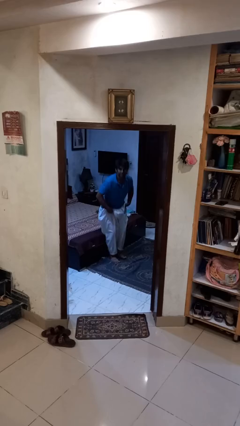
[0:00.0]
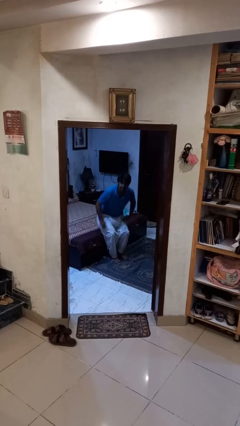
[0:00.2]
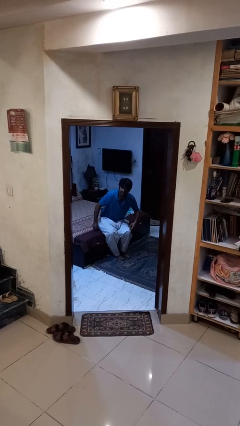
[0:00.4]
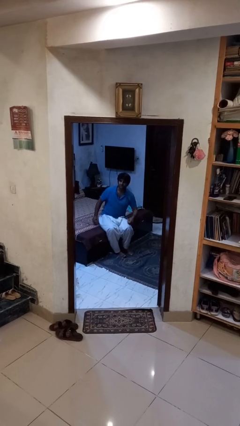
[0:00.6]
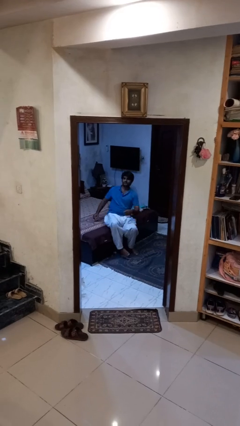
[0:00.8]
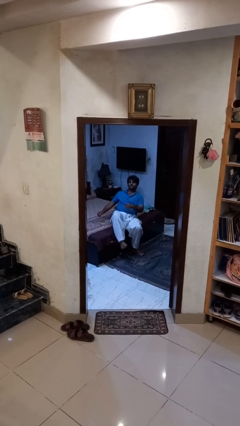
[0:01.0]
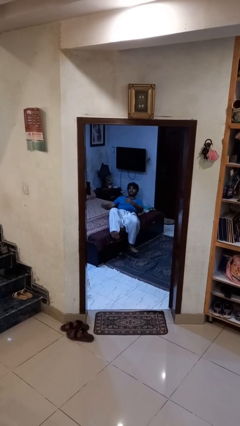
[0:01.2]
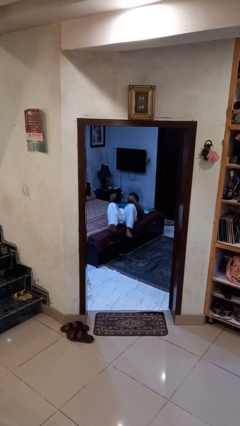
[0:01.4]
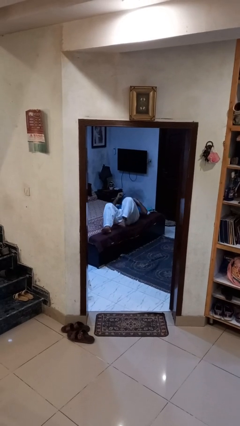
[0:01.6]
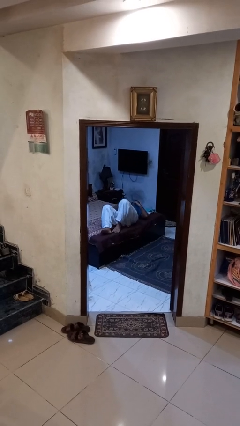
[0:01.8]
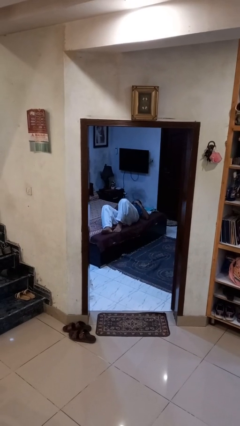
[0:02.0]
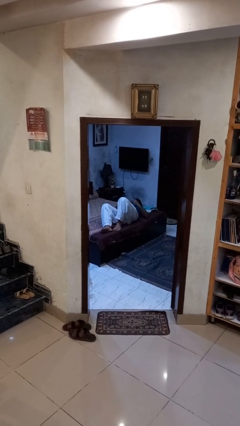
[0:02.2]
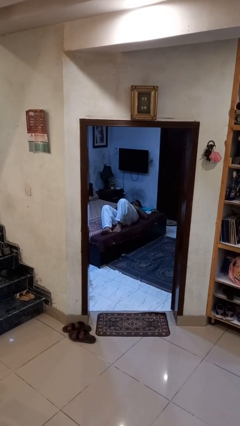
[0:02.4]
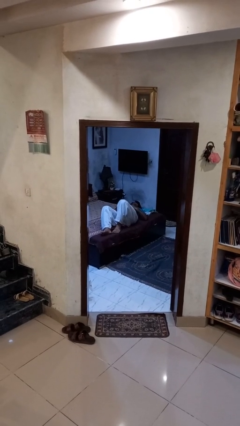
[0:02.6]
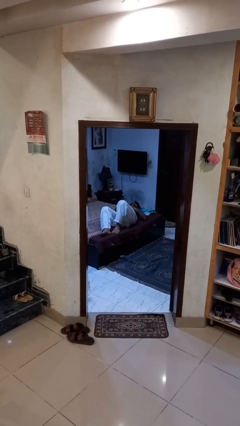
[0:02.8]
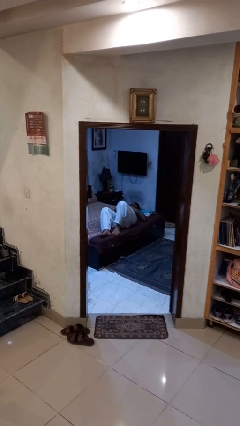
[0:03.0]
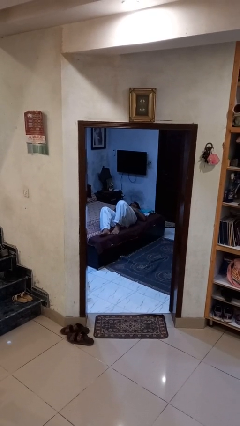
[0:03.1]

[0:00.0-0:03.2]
person lies down on bed

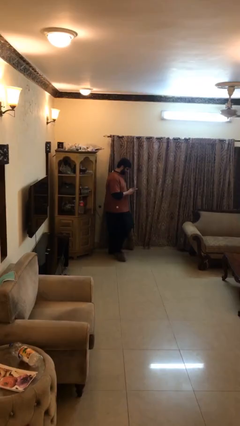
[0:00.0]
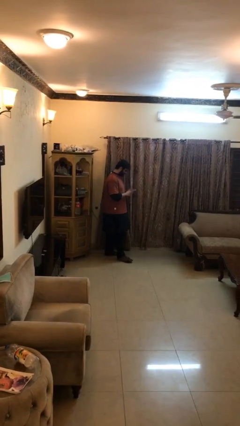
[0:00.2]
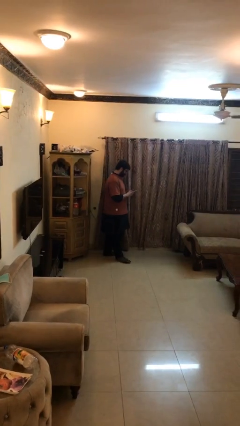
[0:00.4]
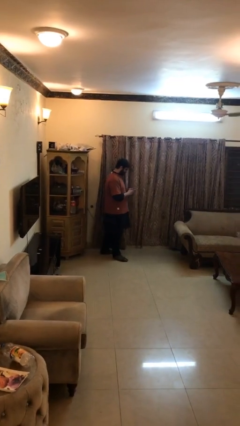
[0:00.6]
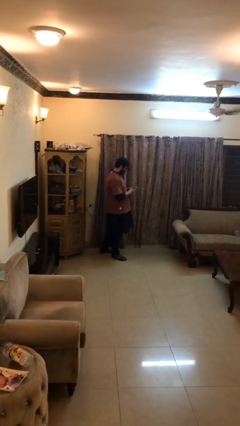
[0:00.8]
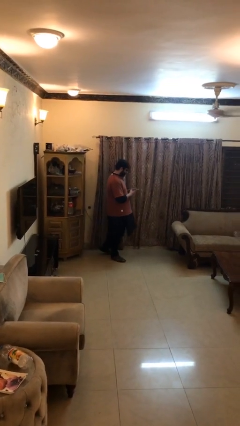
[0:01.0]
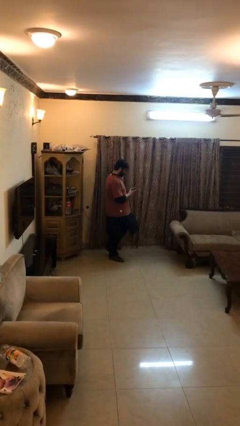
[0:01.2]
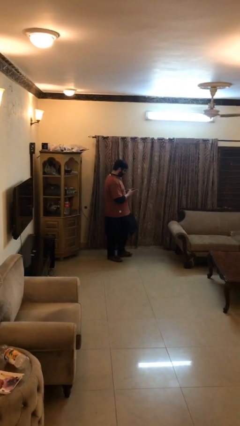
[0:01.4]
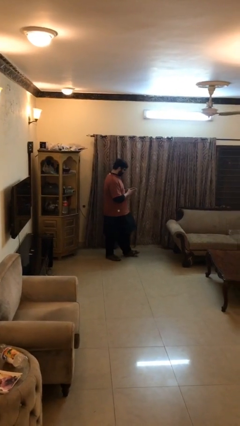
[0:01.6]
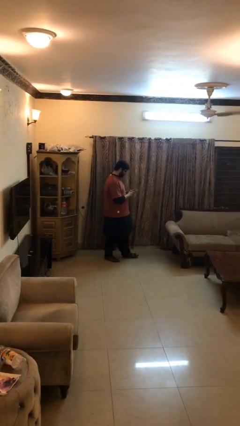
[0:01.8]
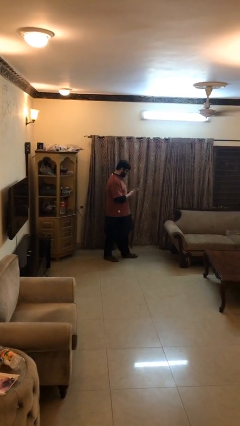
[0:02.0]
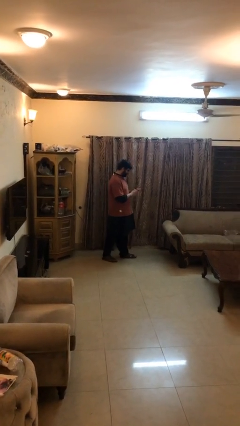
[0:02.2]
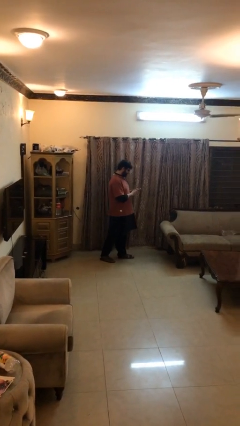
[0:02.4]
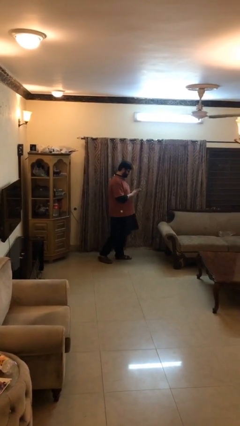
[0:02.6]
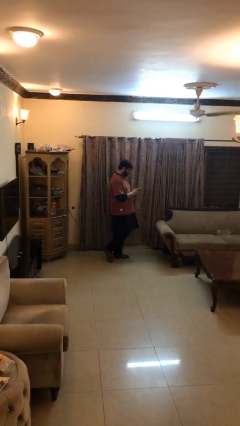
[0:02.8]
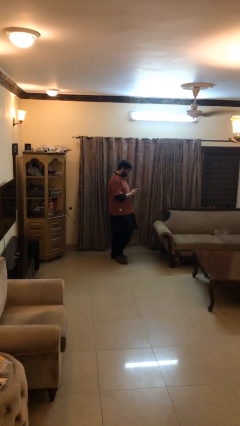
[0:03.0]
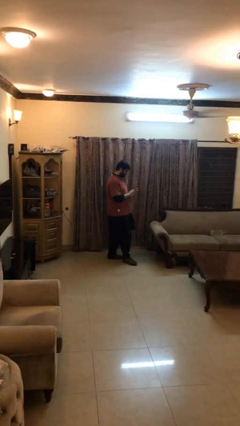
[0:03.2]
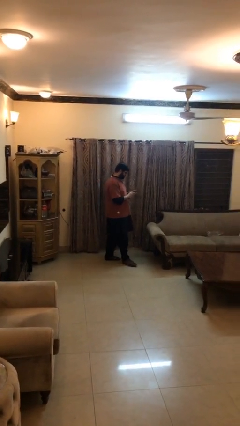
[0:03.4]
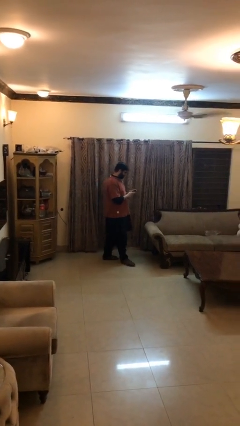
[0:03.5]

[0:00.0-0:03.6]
person texts on phone

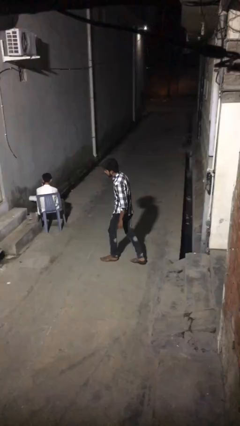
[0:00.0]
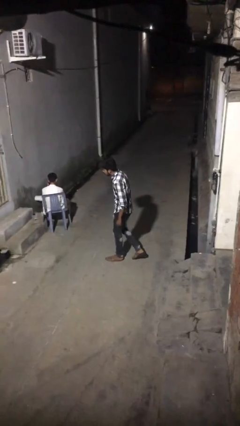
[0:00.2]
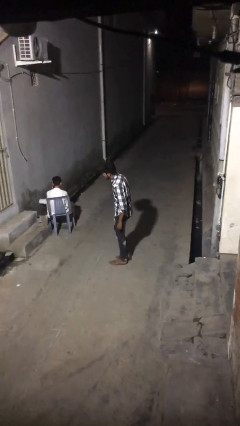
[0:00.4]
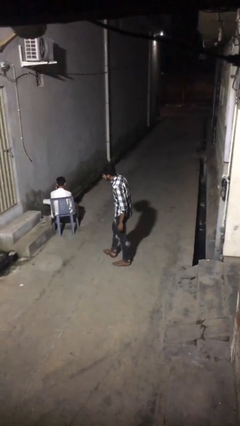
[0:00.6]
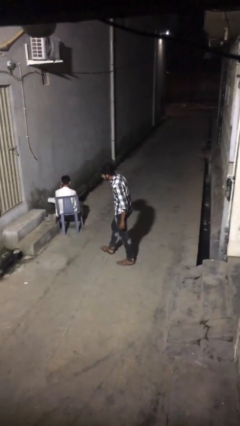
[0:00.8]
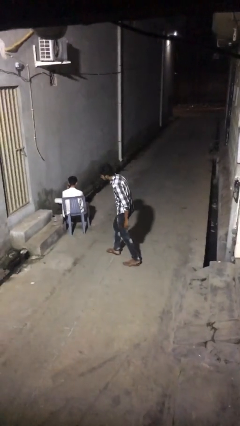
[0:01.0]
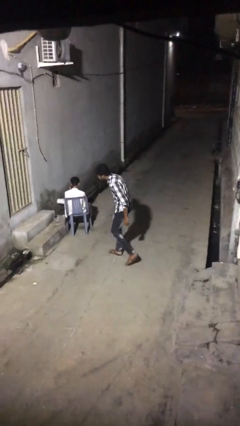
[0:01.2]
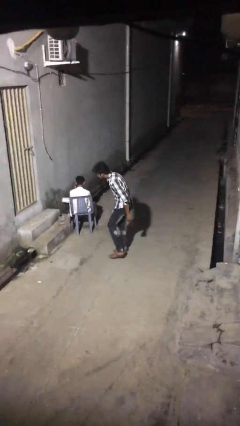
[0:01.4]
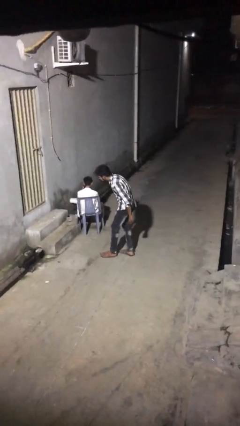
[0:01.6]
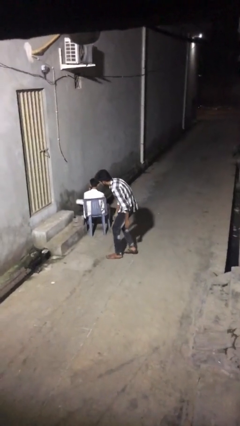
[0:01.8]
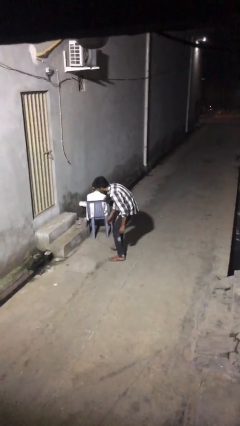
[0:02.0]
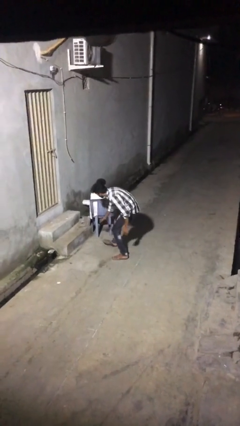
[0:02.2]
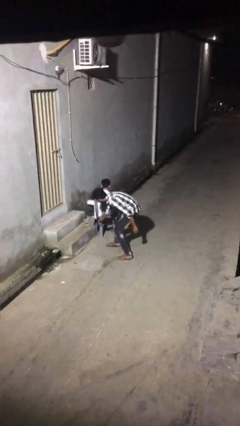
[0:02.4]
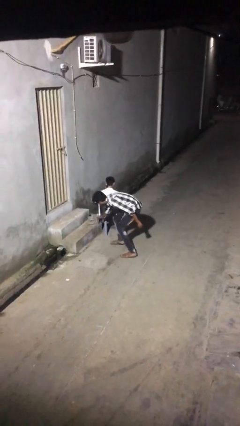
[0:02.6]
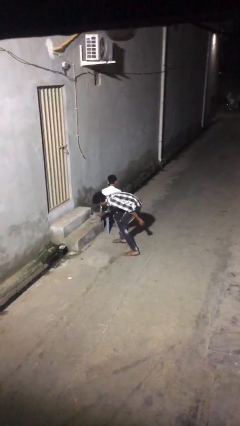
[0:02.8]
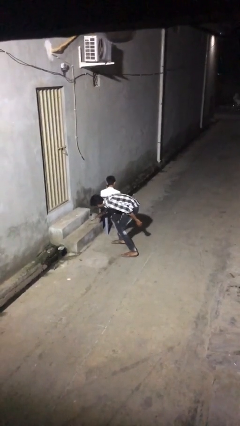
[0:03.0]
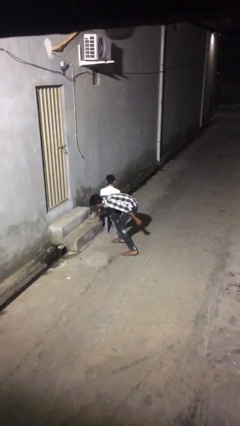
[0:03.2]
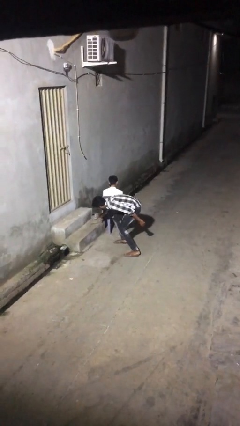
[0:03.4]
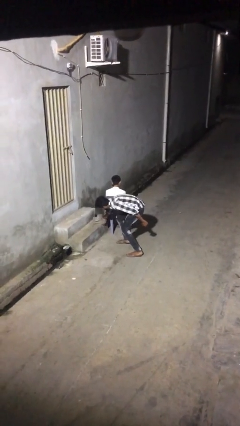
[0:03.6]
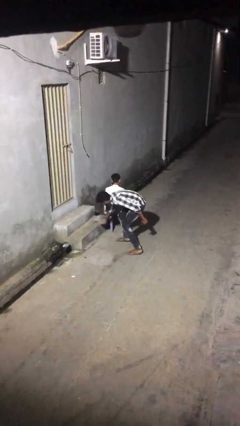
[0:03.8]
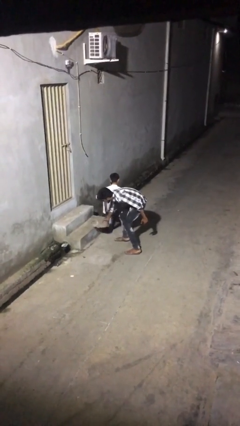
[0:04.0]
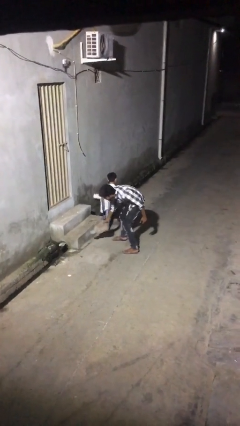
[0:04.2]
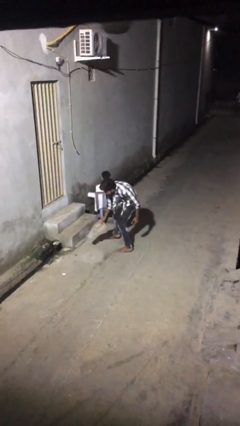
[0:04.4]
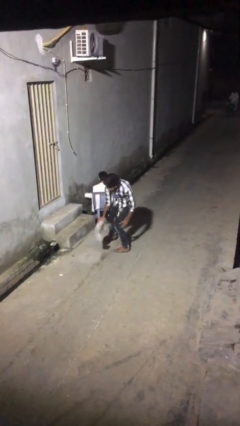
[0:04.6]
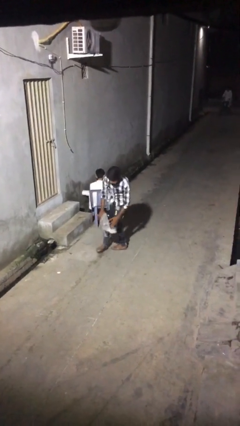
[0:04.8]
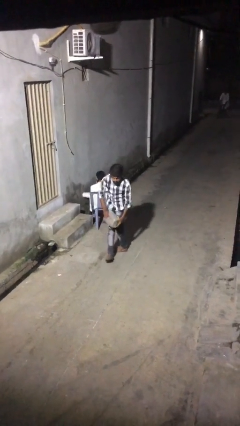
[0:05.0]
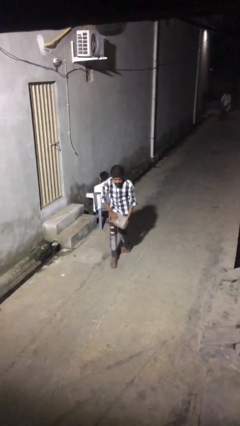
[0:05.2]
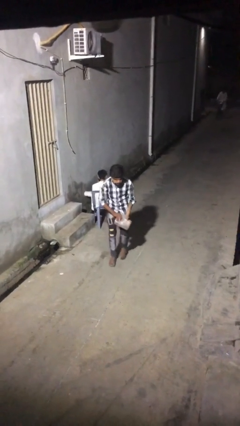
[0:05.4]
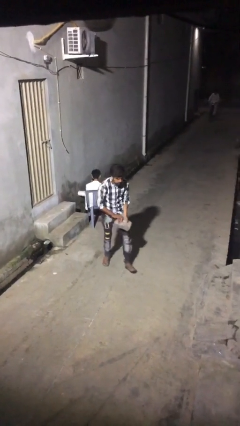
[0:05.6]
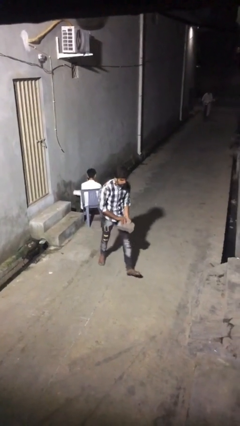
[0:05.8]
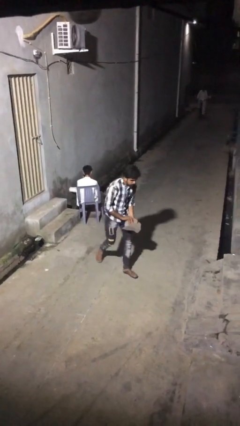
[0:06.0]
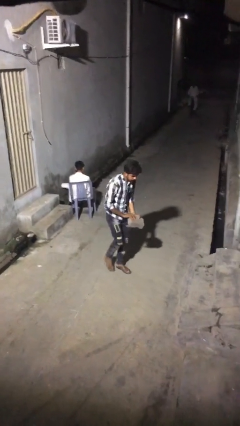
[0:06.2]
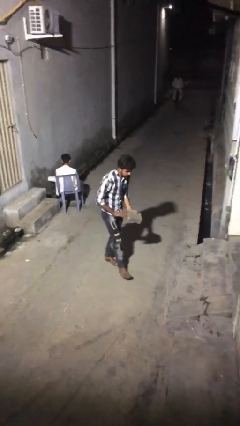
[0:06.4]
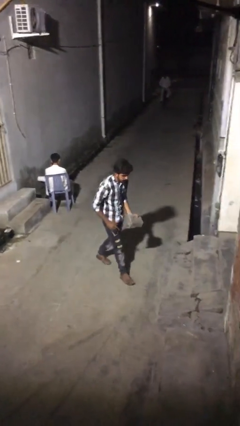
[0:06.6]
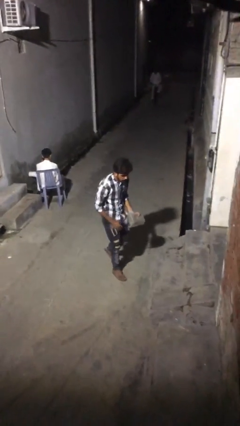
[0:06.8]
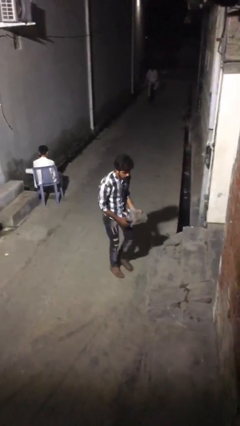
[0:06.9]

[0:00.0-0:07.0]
person steals object from person

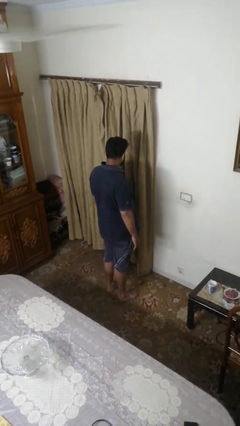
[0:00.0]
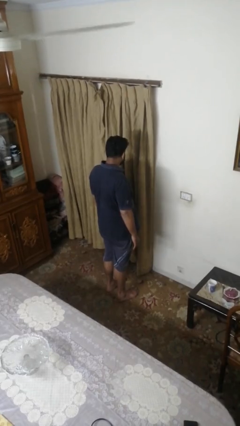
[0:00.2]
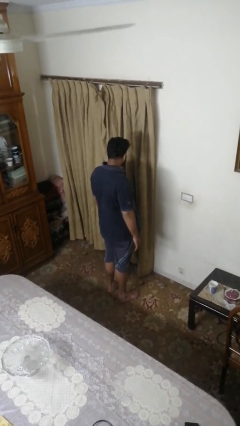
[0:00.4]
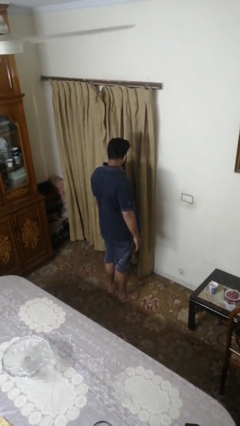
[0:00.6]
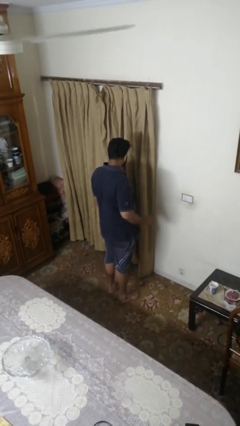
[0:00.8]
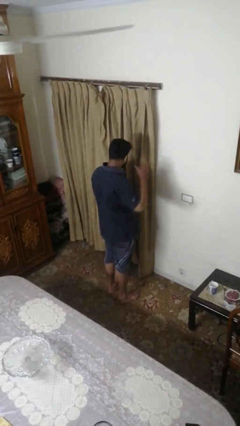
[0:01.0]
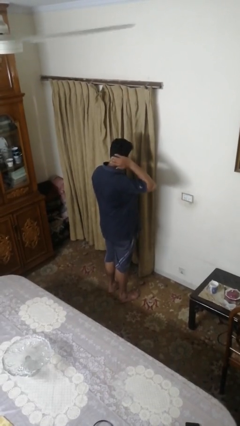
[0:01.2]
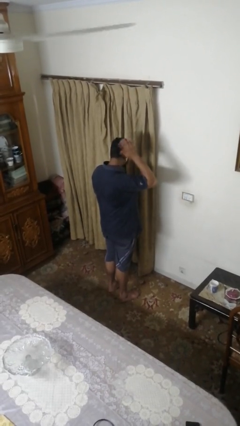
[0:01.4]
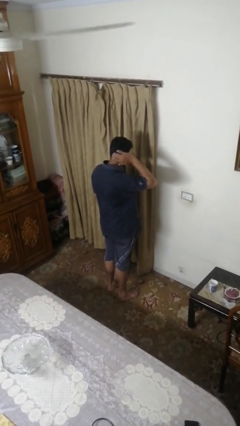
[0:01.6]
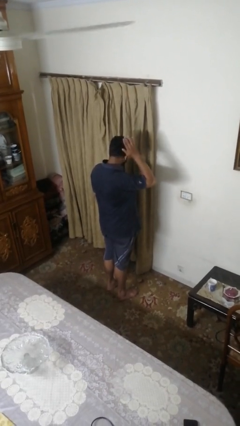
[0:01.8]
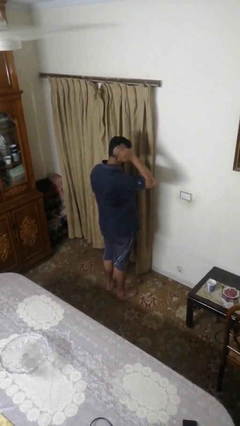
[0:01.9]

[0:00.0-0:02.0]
person strokes hair

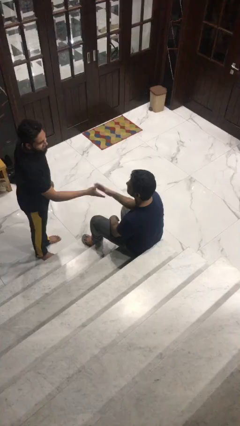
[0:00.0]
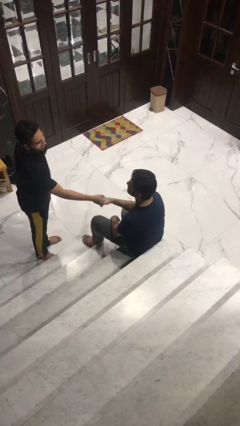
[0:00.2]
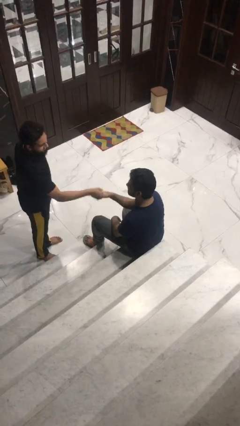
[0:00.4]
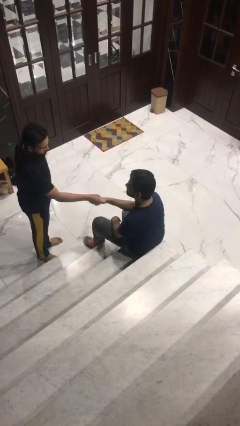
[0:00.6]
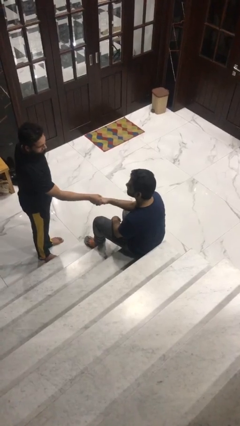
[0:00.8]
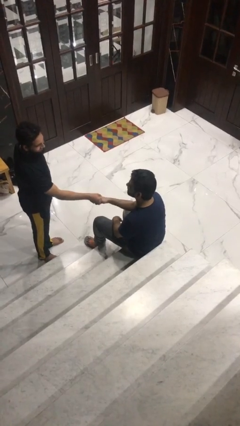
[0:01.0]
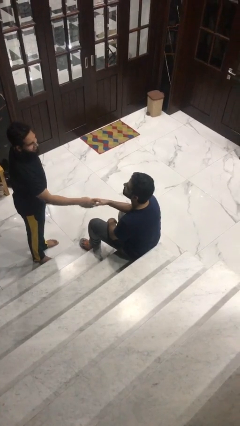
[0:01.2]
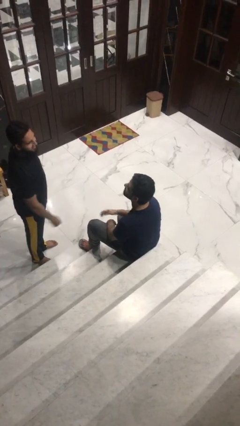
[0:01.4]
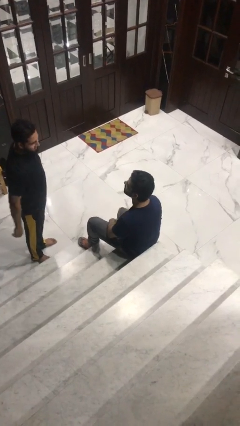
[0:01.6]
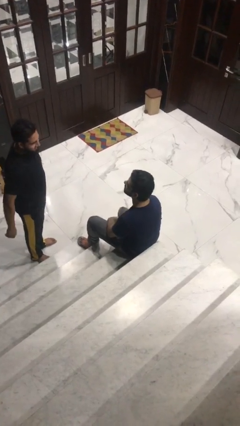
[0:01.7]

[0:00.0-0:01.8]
person shakes hand

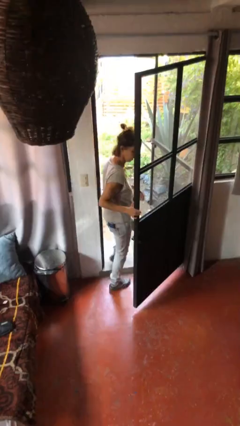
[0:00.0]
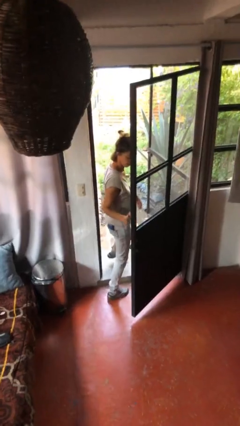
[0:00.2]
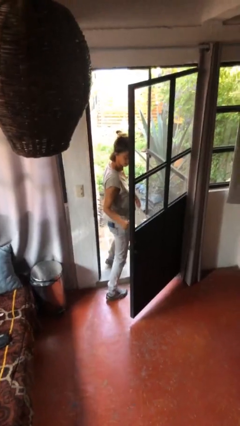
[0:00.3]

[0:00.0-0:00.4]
person closes facility door
